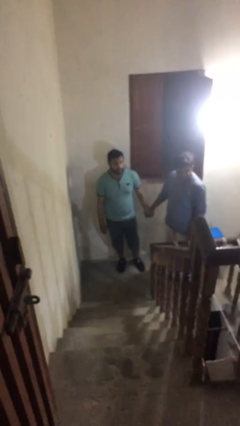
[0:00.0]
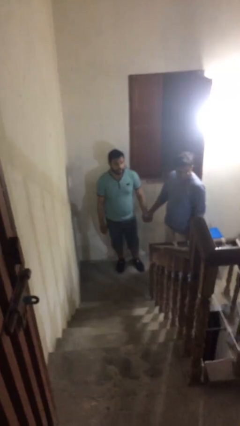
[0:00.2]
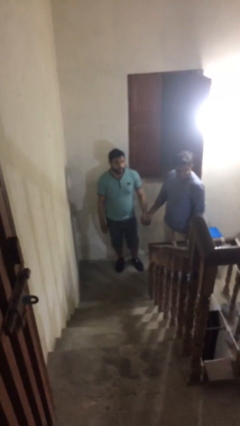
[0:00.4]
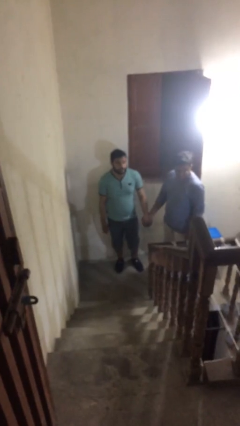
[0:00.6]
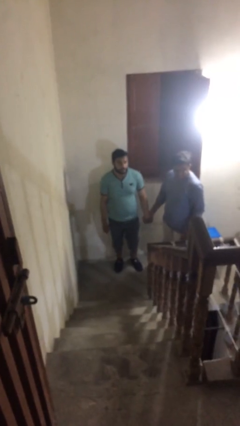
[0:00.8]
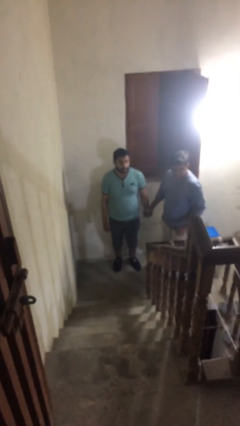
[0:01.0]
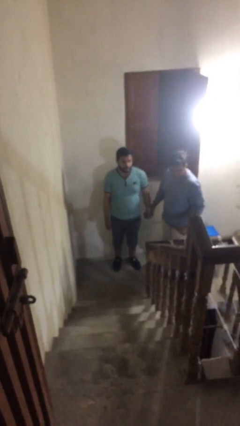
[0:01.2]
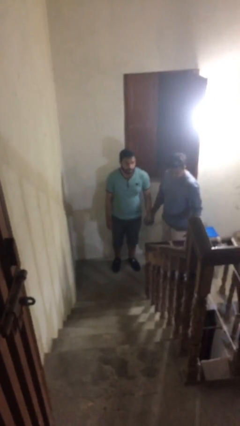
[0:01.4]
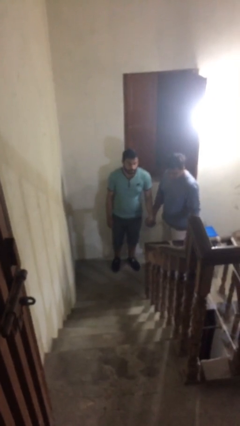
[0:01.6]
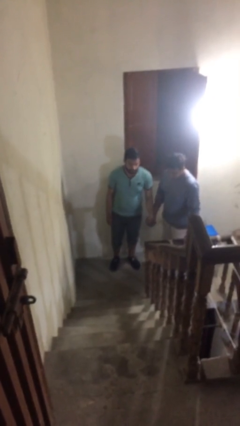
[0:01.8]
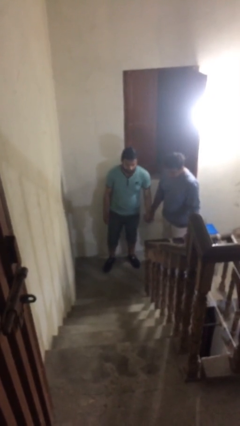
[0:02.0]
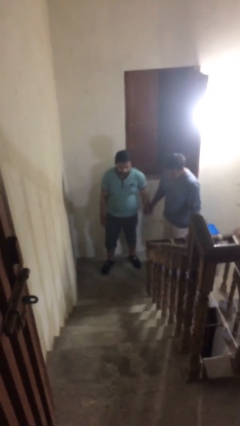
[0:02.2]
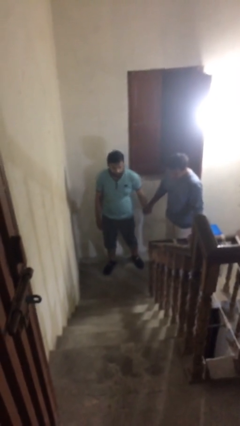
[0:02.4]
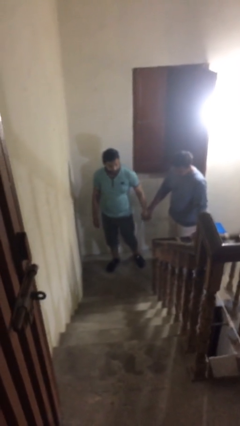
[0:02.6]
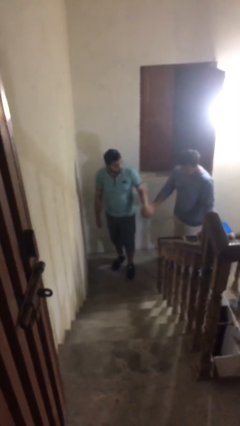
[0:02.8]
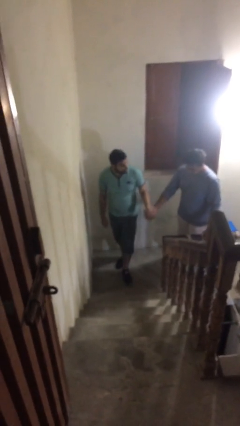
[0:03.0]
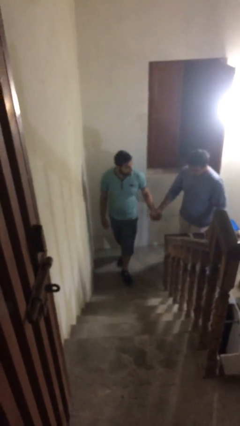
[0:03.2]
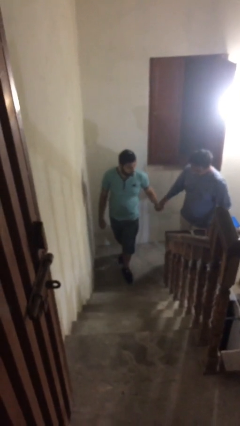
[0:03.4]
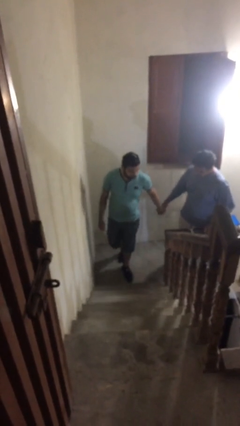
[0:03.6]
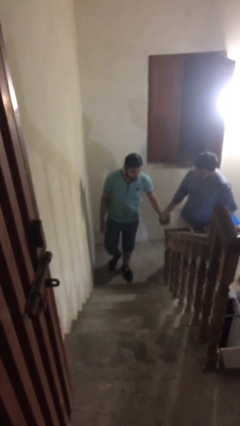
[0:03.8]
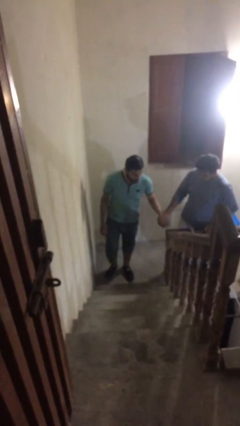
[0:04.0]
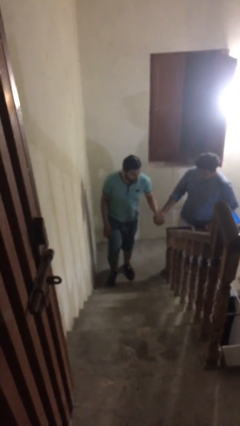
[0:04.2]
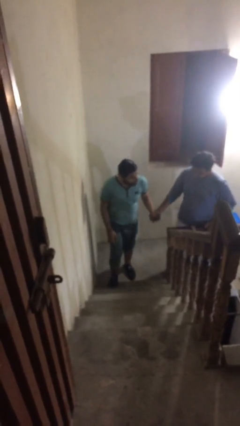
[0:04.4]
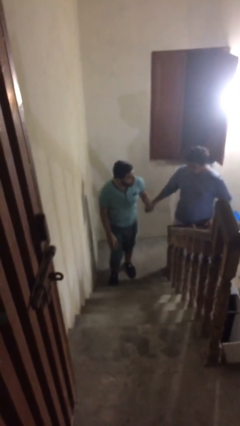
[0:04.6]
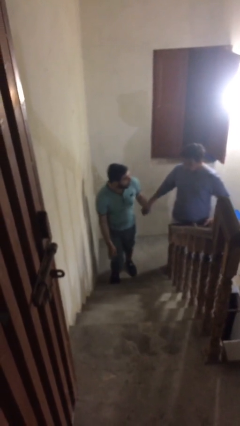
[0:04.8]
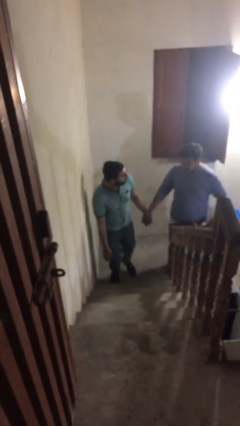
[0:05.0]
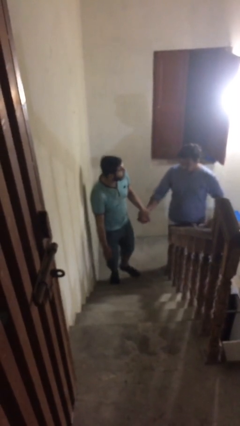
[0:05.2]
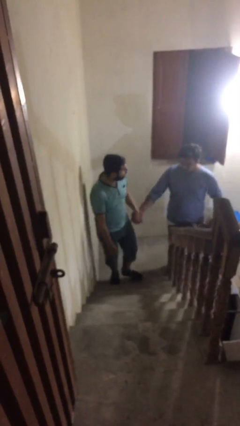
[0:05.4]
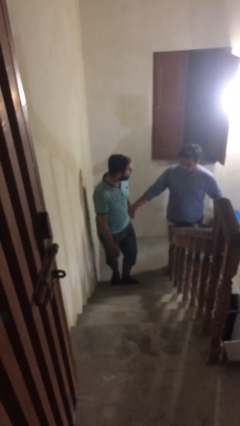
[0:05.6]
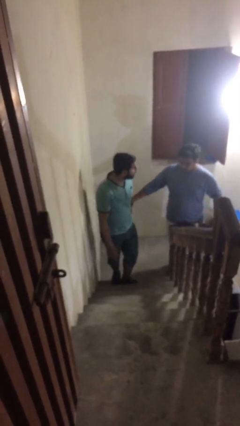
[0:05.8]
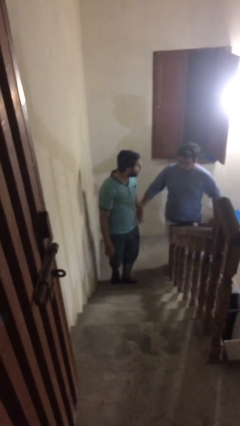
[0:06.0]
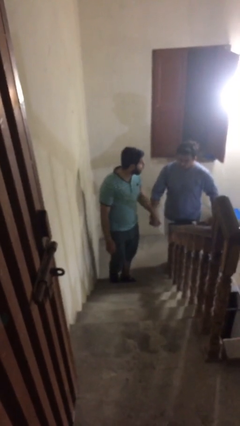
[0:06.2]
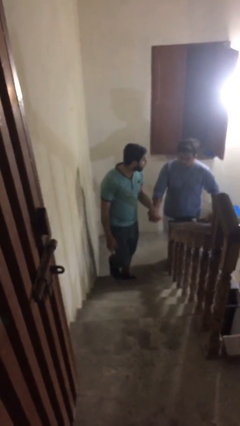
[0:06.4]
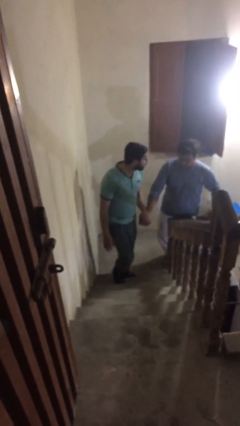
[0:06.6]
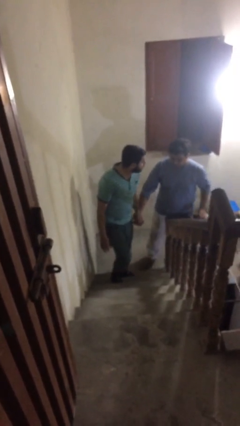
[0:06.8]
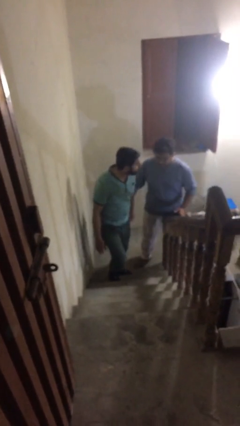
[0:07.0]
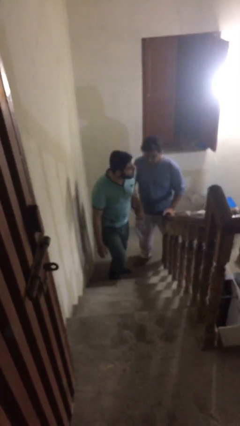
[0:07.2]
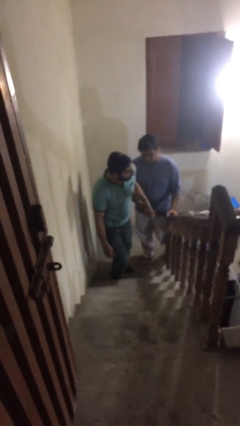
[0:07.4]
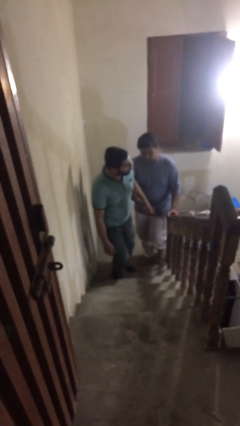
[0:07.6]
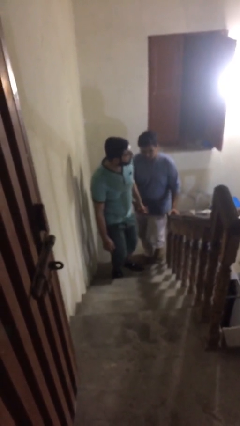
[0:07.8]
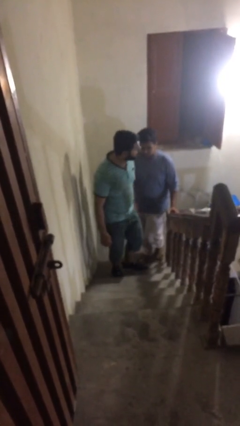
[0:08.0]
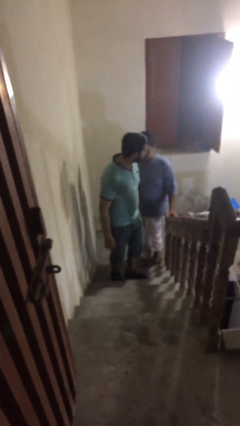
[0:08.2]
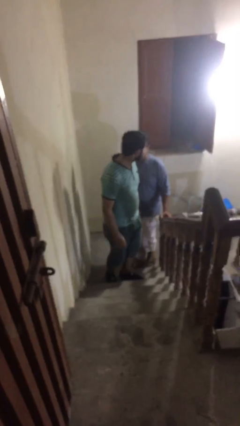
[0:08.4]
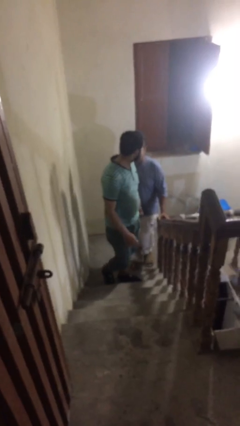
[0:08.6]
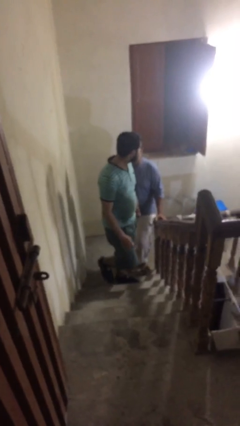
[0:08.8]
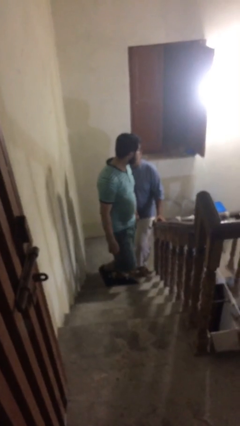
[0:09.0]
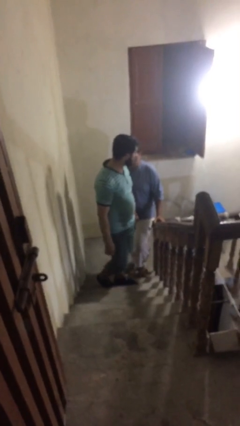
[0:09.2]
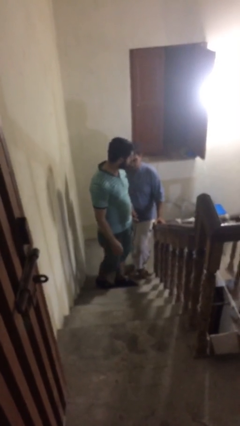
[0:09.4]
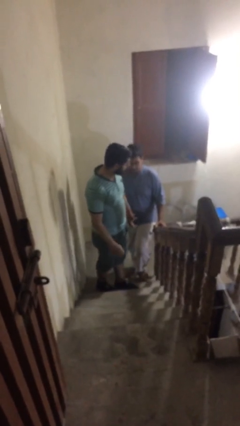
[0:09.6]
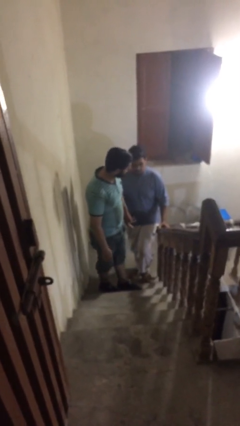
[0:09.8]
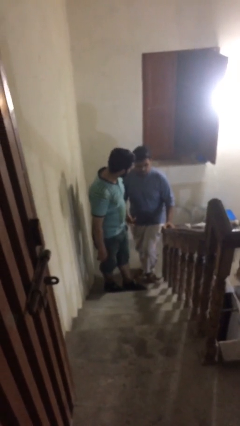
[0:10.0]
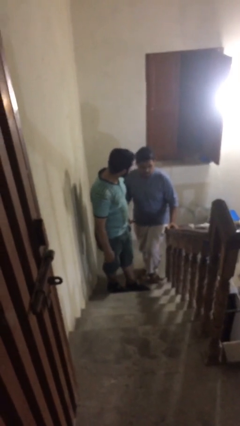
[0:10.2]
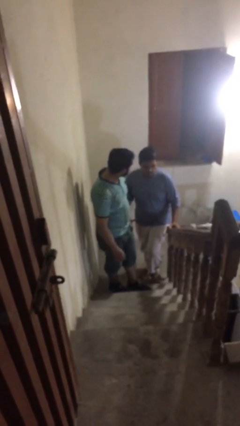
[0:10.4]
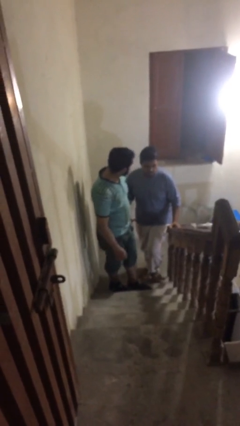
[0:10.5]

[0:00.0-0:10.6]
person holds hand

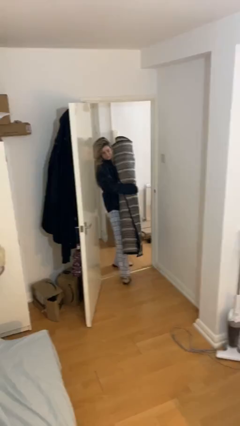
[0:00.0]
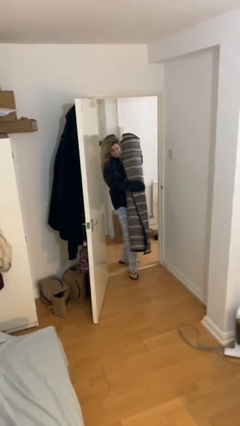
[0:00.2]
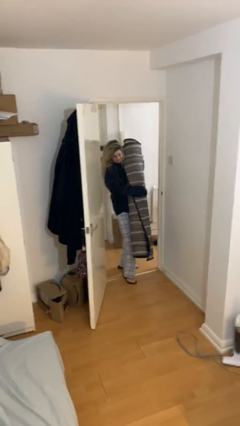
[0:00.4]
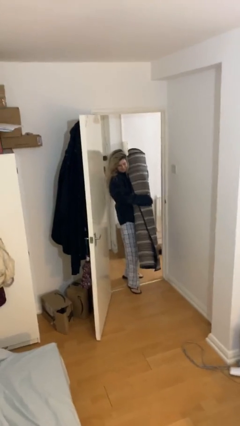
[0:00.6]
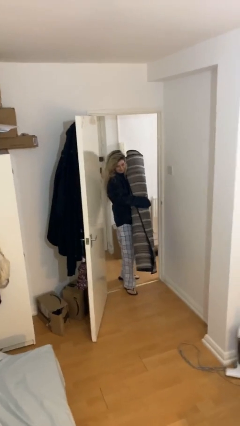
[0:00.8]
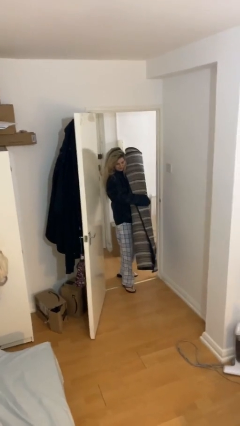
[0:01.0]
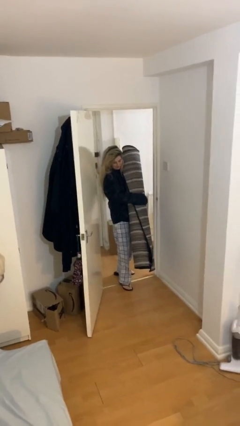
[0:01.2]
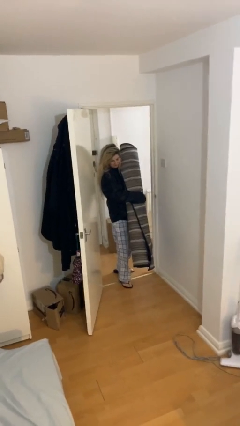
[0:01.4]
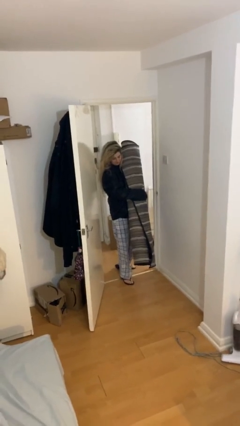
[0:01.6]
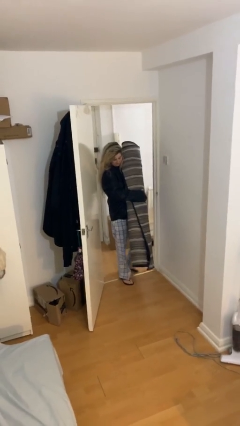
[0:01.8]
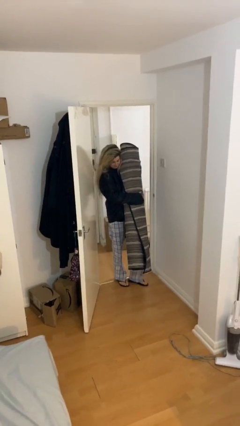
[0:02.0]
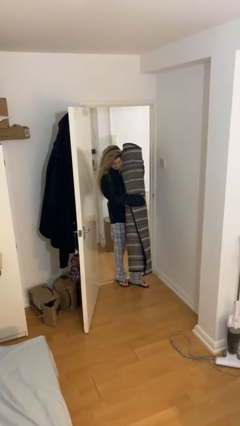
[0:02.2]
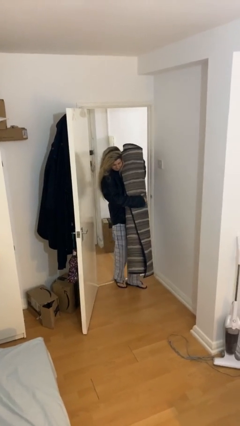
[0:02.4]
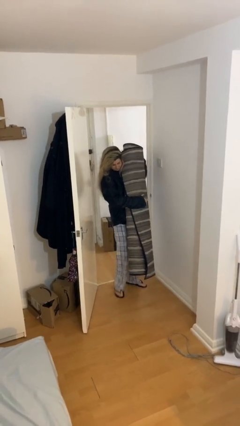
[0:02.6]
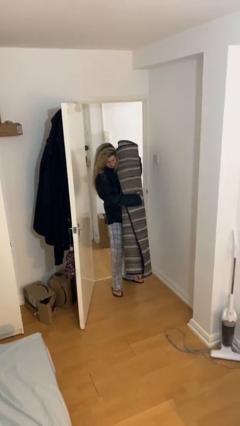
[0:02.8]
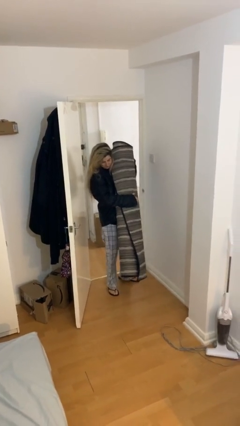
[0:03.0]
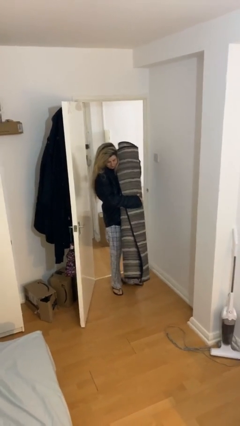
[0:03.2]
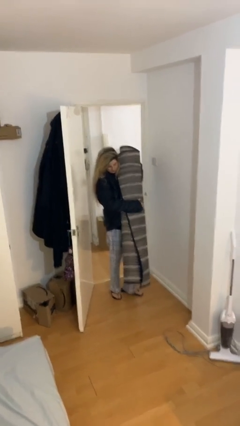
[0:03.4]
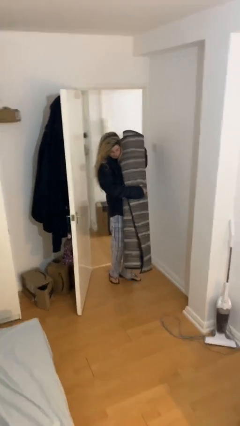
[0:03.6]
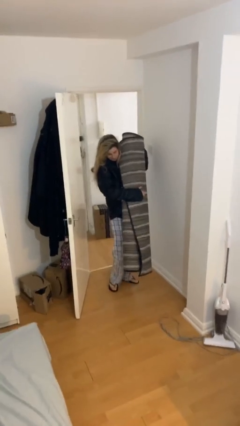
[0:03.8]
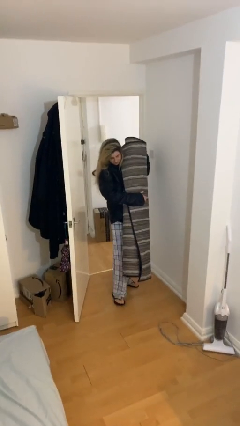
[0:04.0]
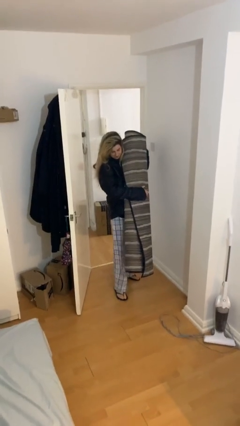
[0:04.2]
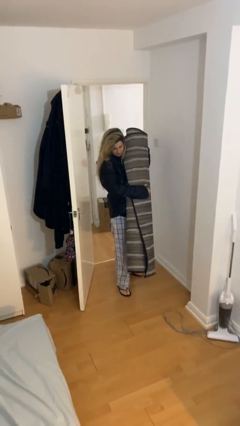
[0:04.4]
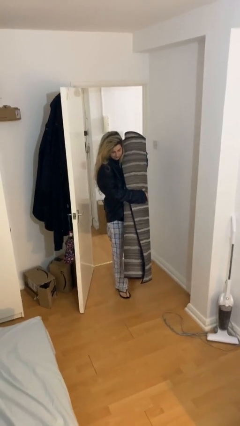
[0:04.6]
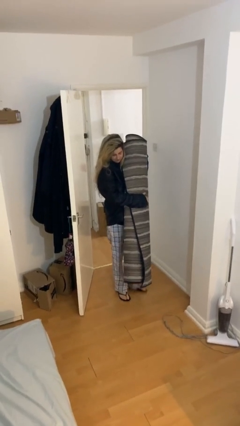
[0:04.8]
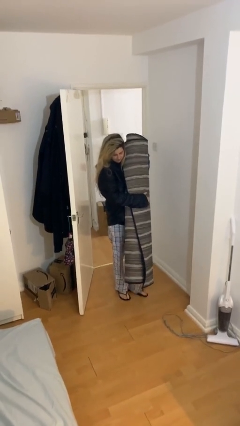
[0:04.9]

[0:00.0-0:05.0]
person carries heavy object

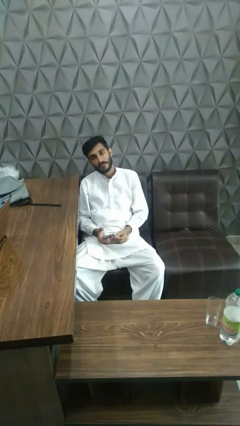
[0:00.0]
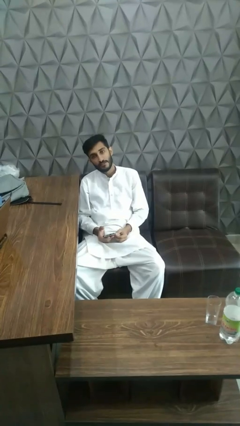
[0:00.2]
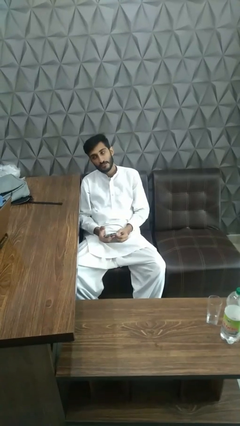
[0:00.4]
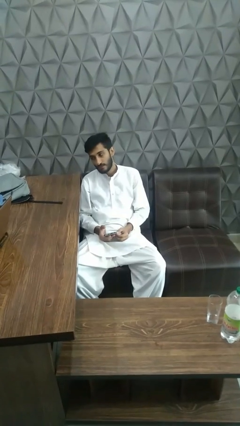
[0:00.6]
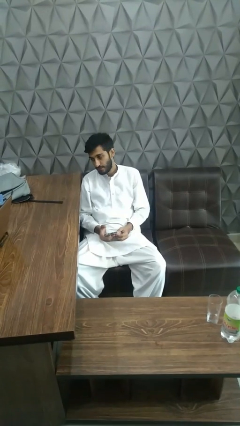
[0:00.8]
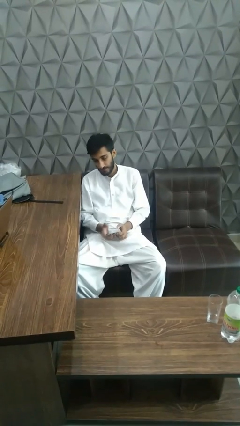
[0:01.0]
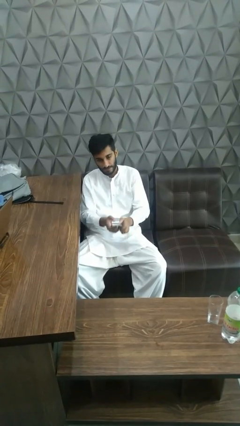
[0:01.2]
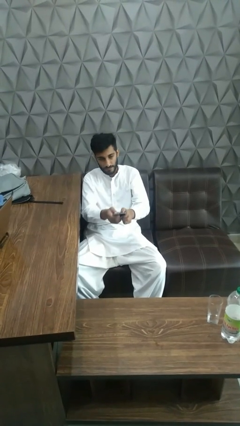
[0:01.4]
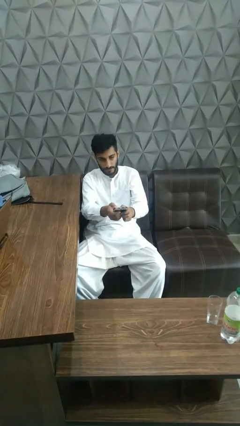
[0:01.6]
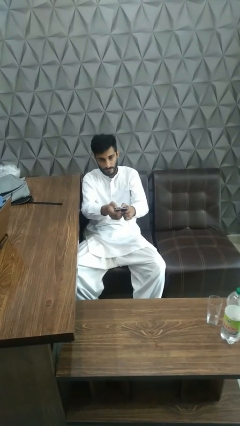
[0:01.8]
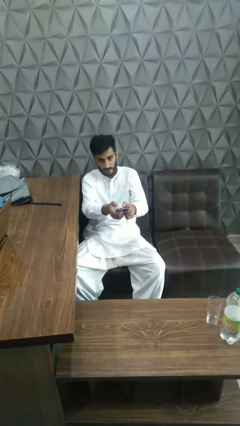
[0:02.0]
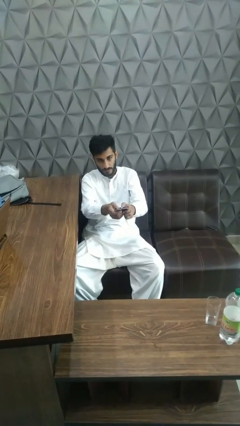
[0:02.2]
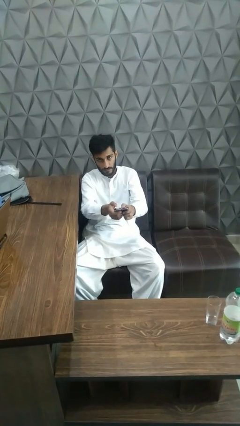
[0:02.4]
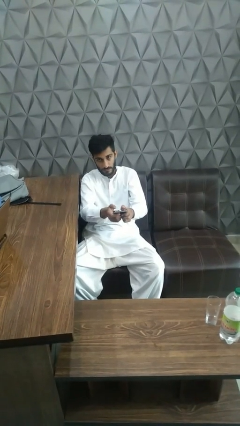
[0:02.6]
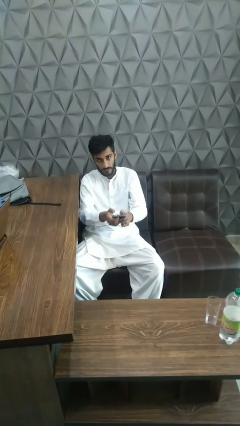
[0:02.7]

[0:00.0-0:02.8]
person uses television remote
